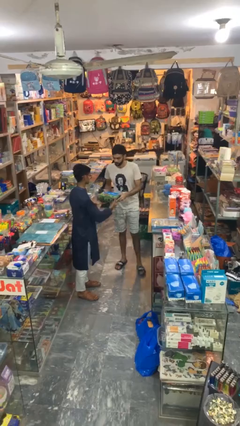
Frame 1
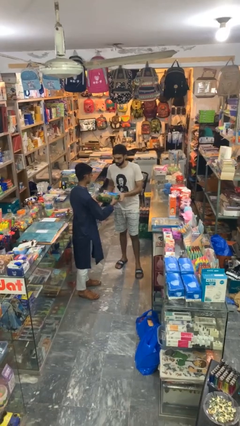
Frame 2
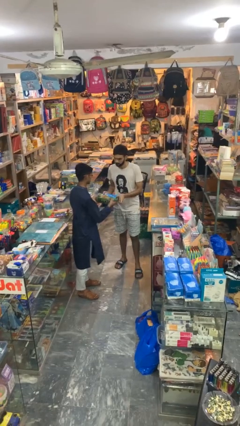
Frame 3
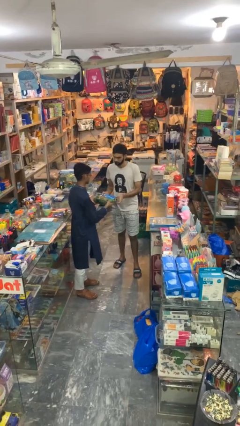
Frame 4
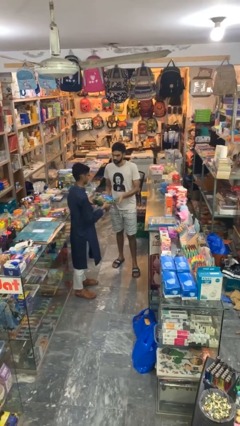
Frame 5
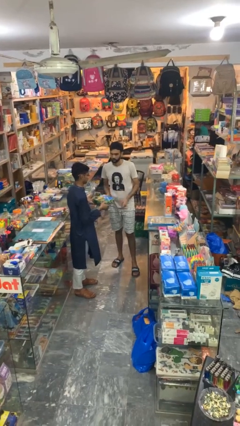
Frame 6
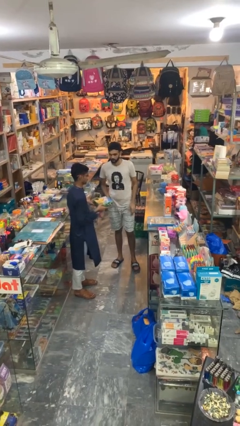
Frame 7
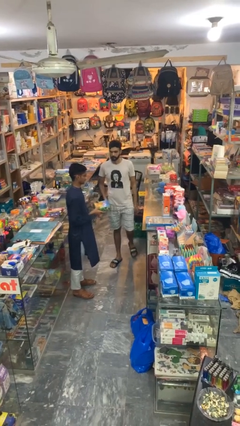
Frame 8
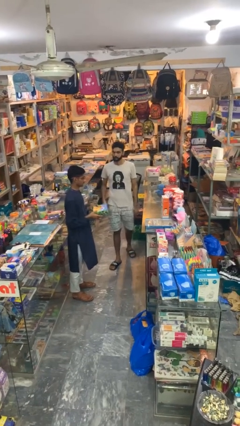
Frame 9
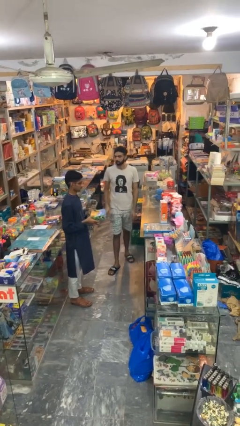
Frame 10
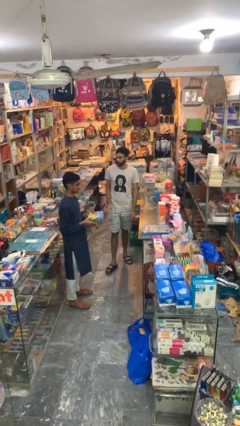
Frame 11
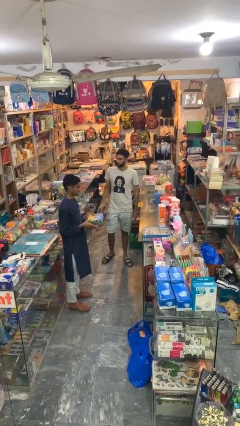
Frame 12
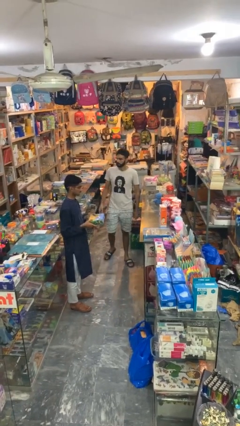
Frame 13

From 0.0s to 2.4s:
person transfers object to person

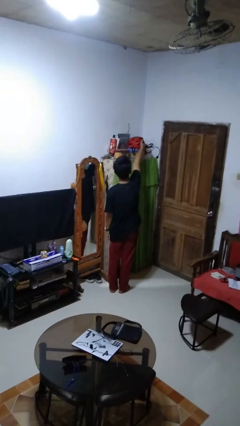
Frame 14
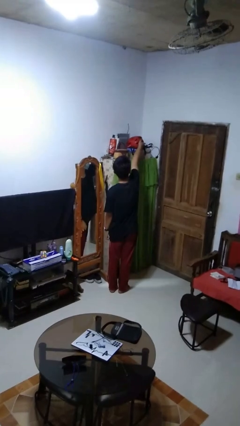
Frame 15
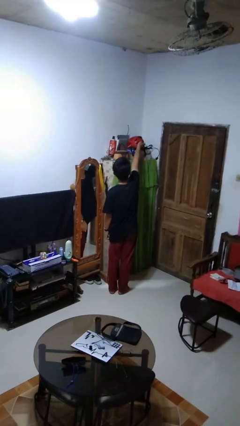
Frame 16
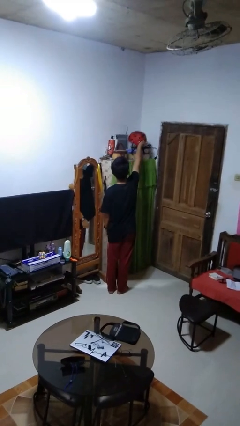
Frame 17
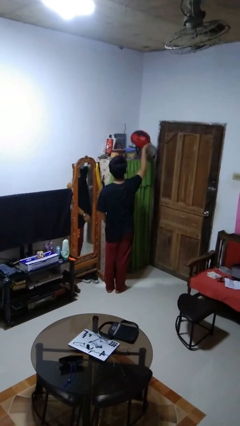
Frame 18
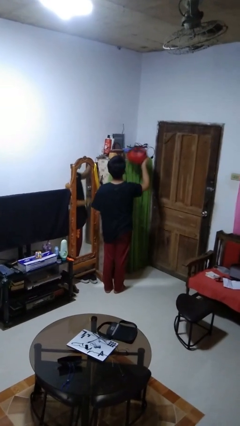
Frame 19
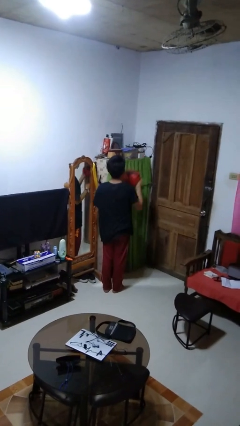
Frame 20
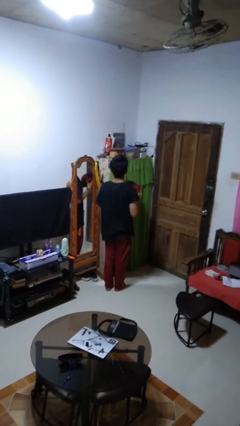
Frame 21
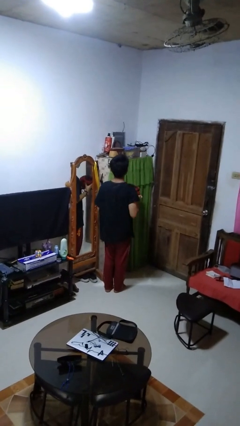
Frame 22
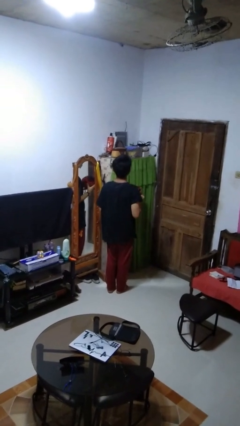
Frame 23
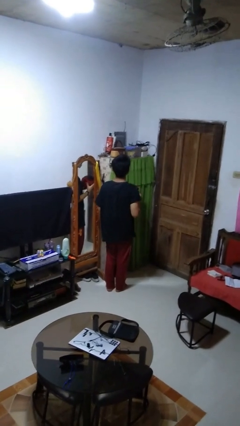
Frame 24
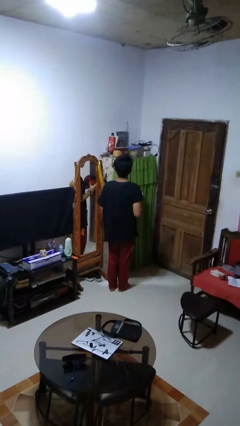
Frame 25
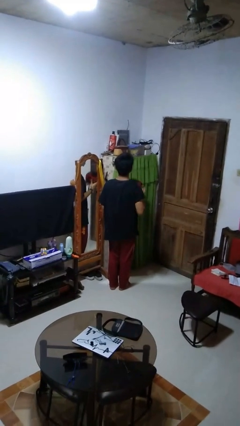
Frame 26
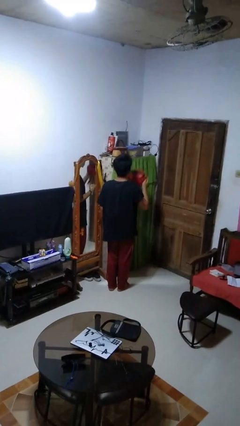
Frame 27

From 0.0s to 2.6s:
person picks up object from shelf

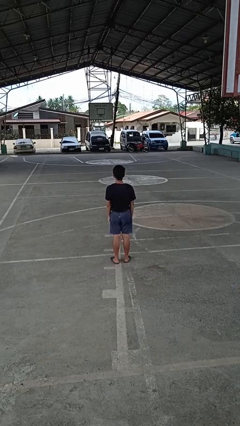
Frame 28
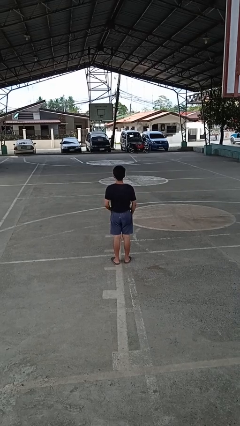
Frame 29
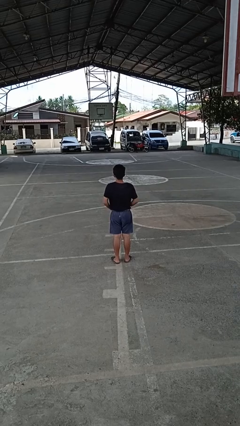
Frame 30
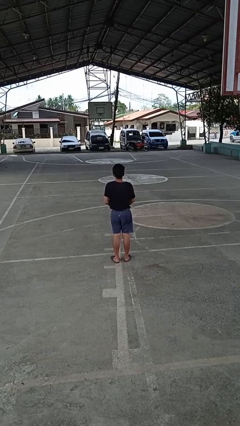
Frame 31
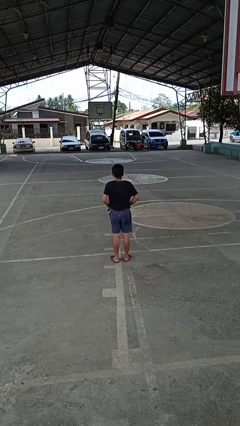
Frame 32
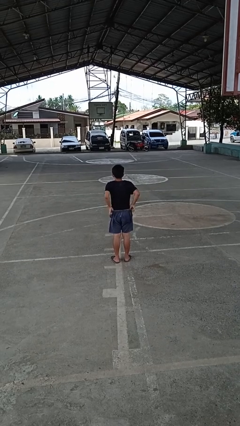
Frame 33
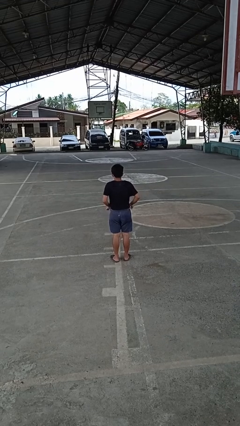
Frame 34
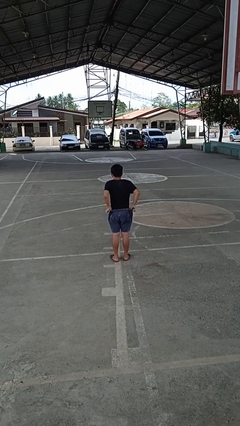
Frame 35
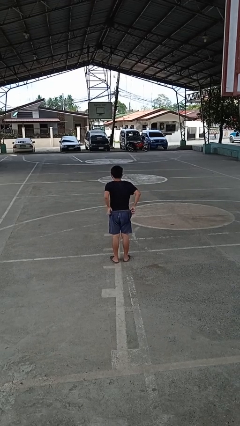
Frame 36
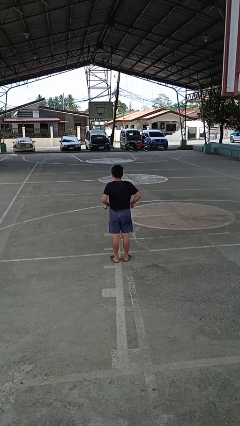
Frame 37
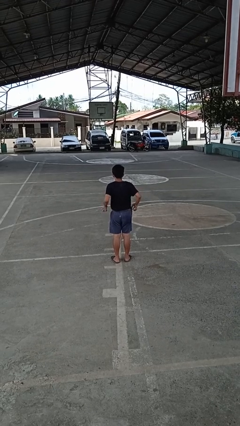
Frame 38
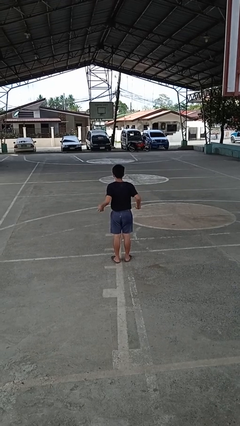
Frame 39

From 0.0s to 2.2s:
person hikes up pants

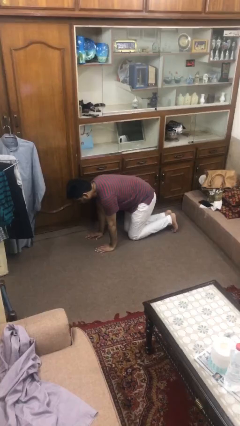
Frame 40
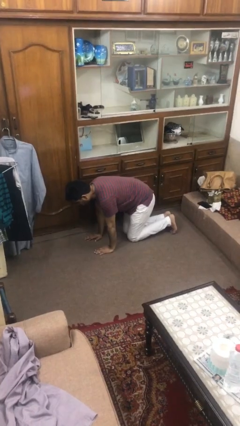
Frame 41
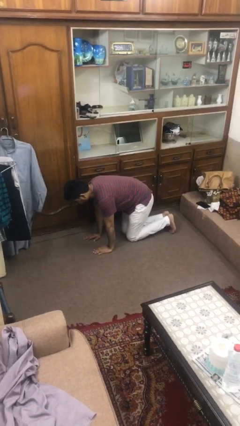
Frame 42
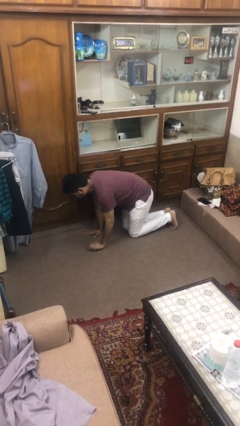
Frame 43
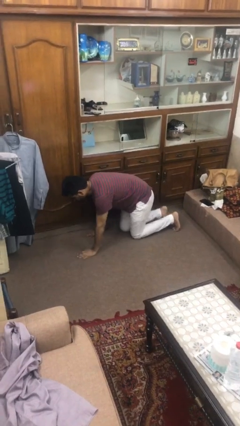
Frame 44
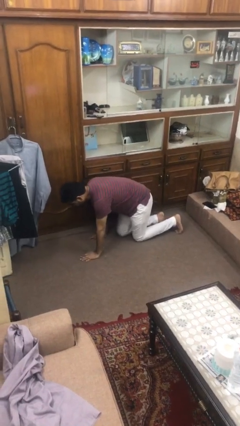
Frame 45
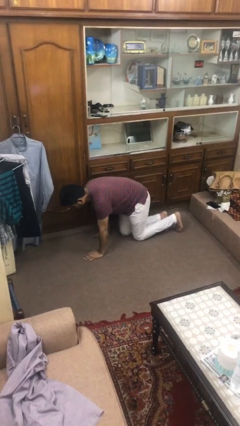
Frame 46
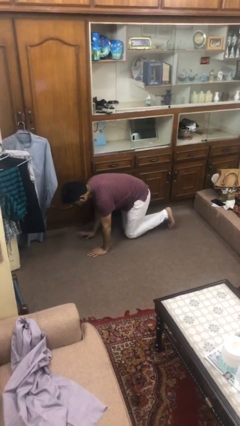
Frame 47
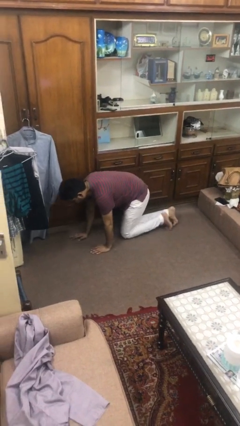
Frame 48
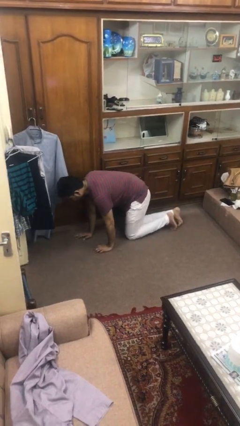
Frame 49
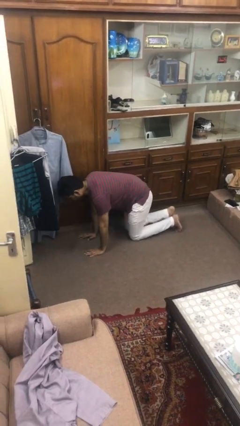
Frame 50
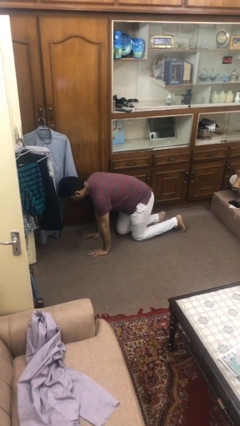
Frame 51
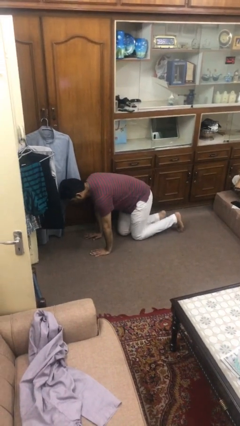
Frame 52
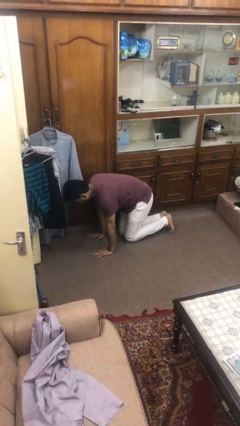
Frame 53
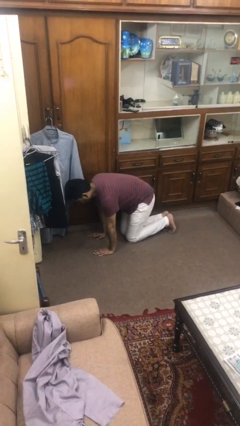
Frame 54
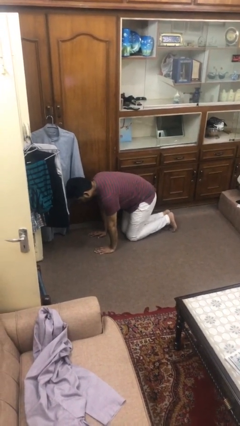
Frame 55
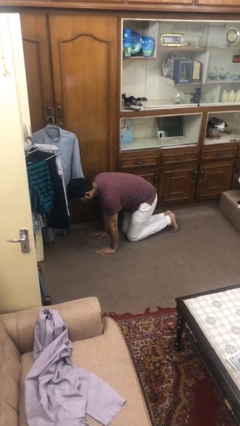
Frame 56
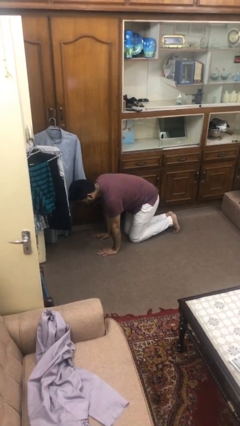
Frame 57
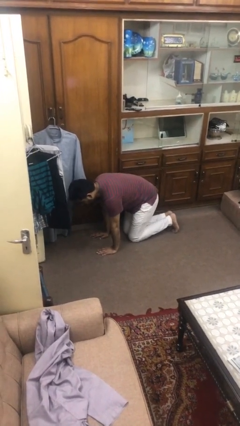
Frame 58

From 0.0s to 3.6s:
person crawls

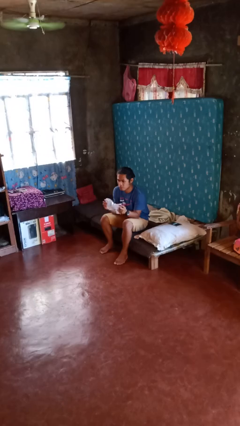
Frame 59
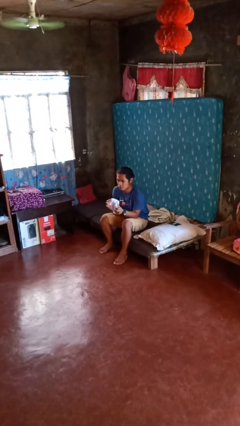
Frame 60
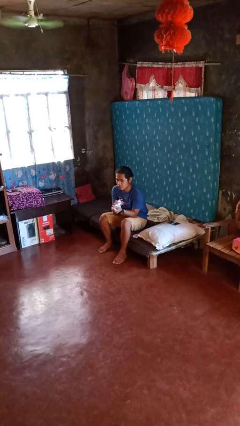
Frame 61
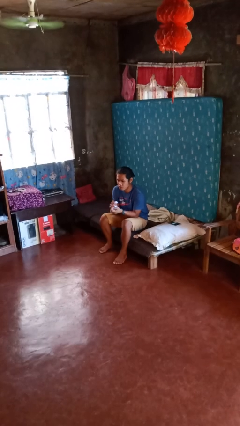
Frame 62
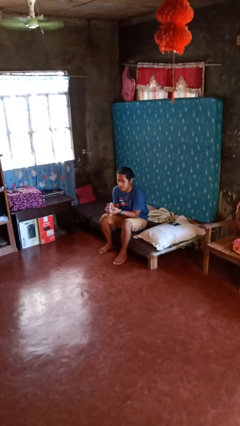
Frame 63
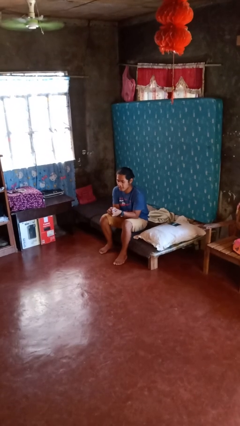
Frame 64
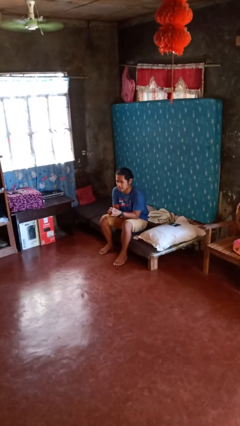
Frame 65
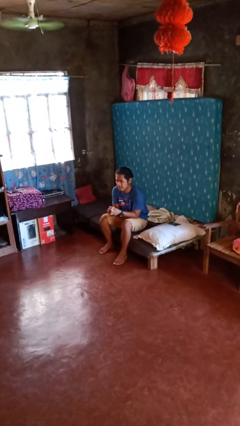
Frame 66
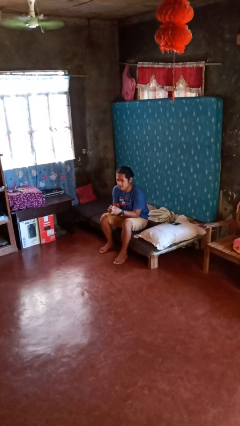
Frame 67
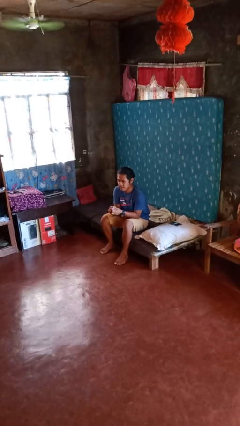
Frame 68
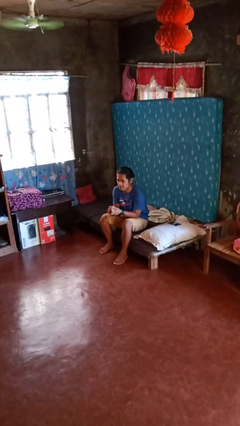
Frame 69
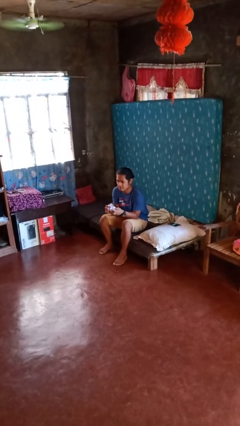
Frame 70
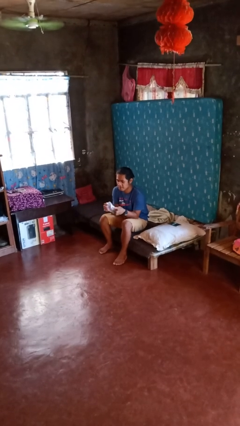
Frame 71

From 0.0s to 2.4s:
person crumples paper

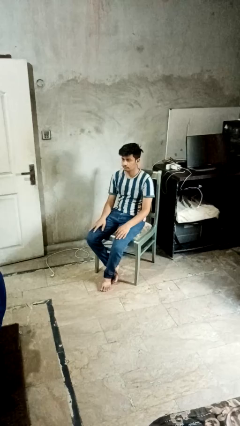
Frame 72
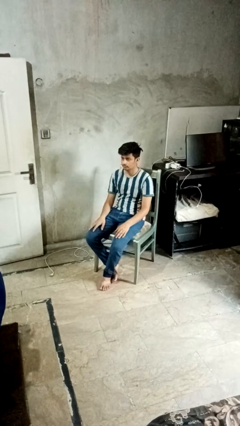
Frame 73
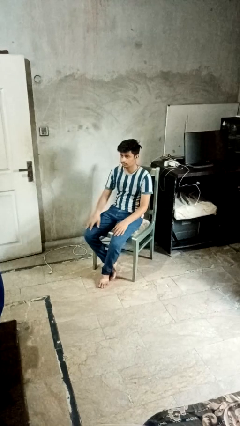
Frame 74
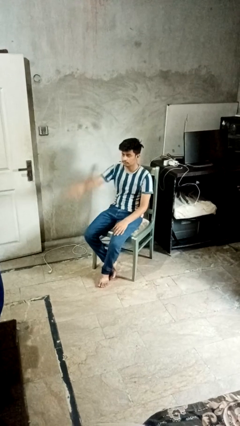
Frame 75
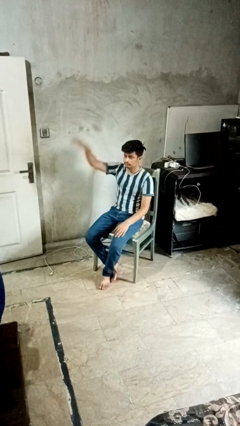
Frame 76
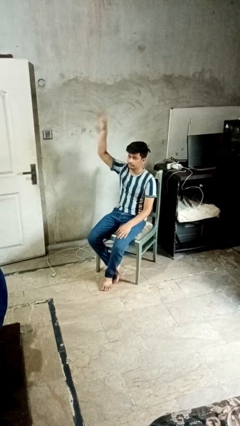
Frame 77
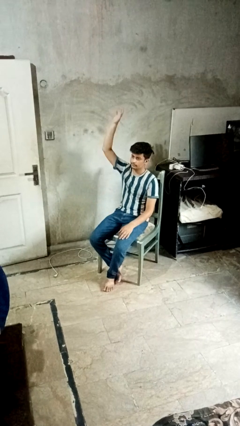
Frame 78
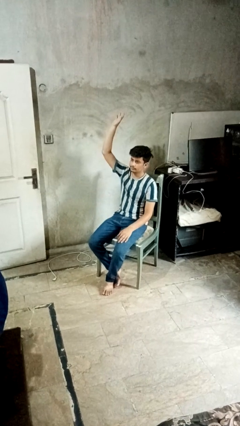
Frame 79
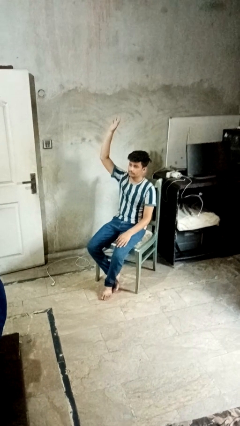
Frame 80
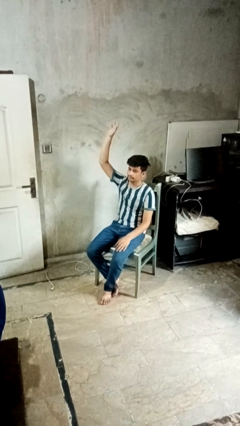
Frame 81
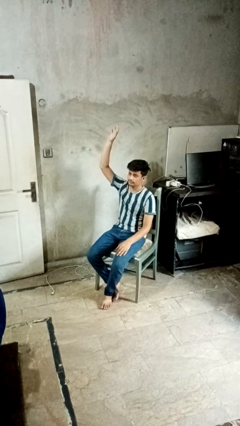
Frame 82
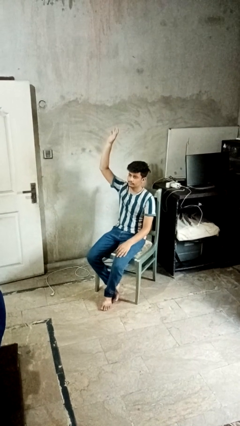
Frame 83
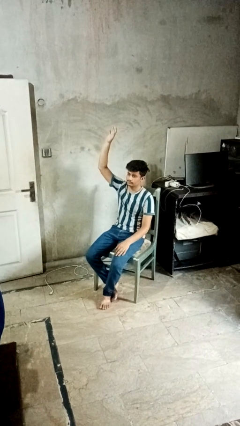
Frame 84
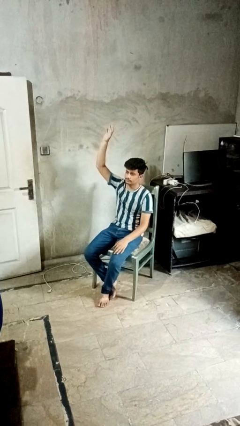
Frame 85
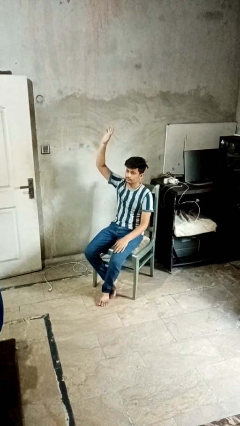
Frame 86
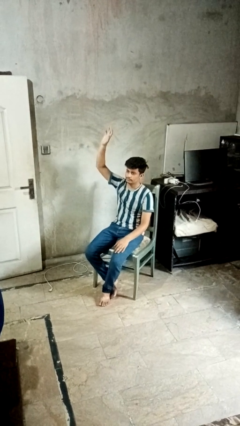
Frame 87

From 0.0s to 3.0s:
person gestures raise hand

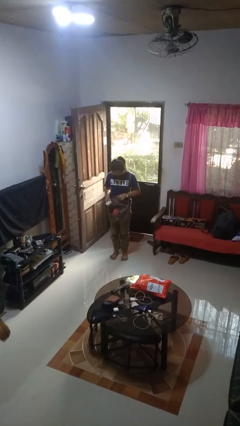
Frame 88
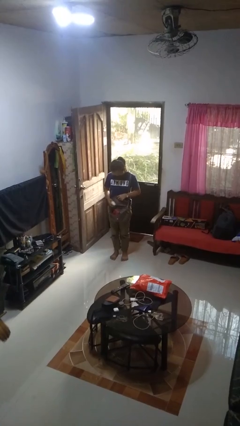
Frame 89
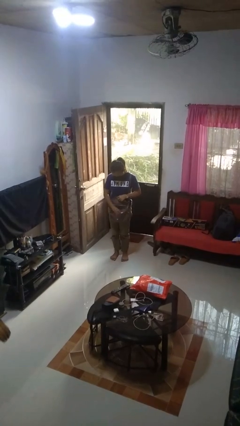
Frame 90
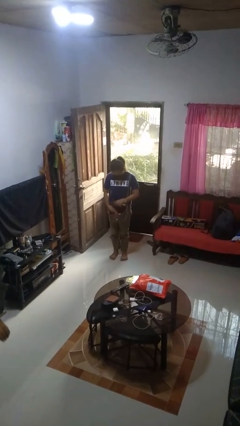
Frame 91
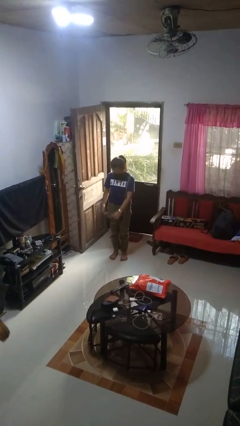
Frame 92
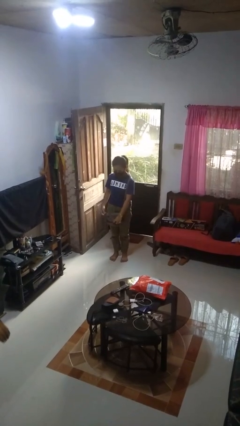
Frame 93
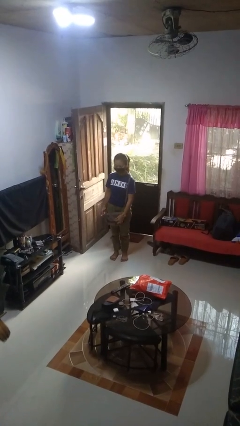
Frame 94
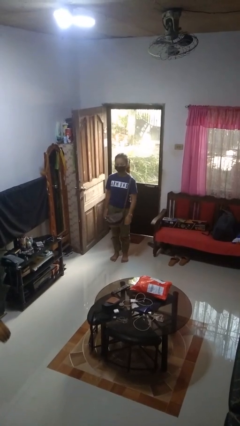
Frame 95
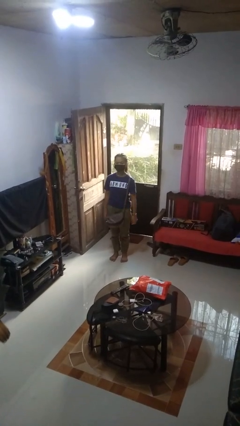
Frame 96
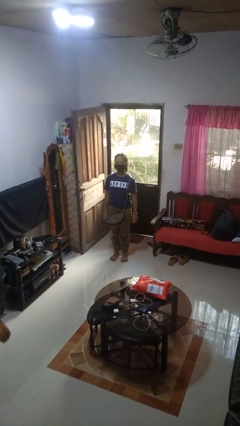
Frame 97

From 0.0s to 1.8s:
person puts object into purse
